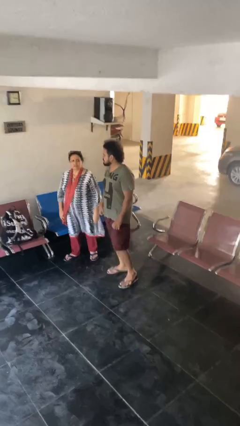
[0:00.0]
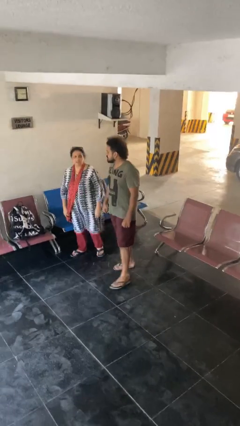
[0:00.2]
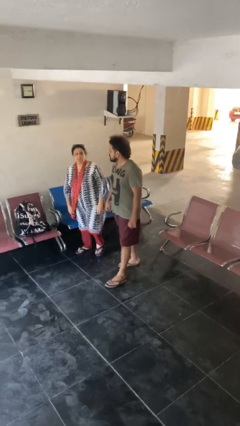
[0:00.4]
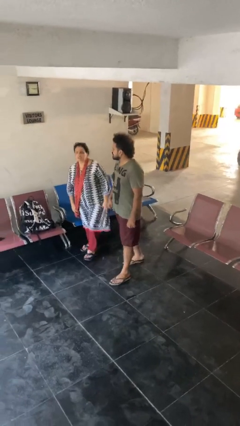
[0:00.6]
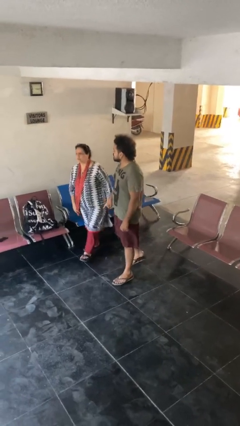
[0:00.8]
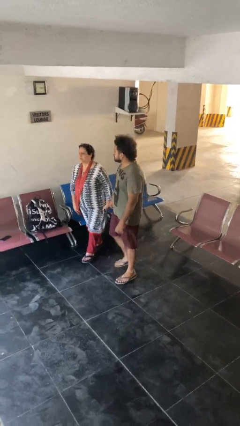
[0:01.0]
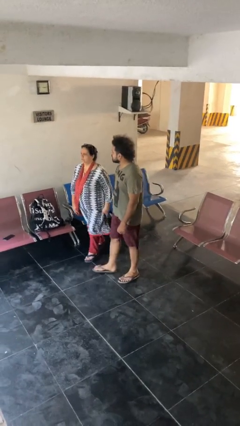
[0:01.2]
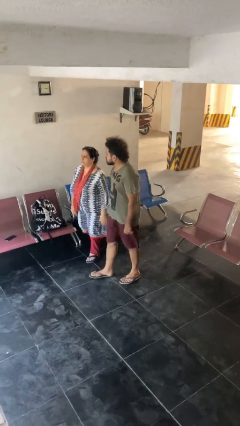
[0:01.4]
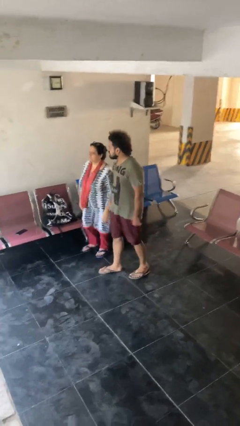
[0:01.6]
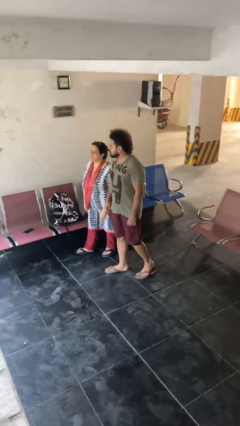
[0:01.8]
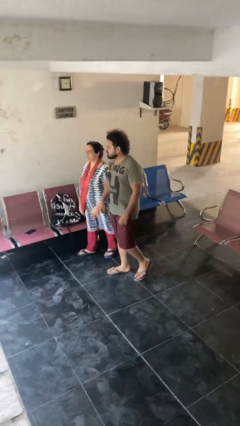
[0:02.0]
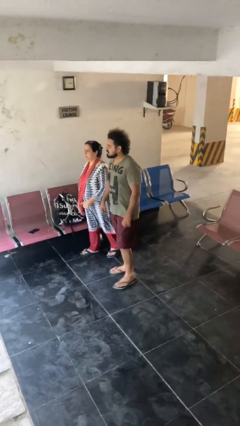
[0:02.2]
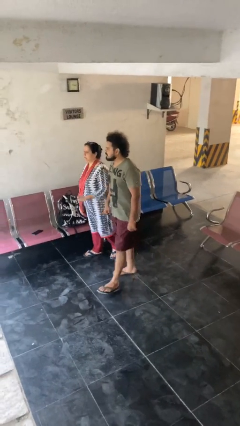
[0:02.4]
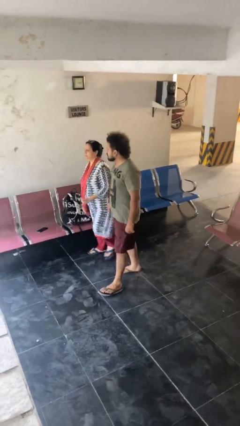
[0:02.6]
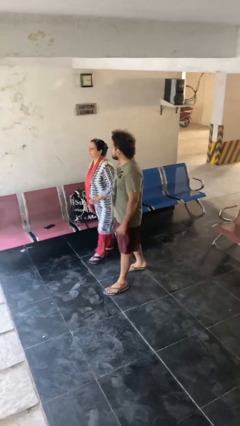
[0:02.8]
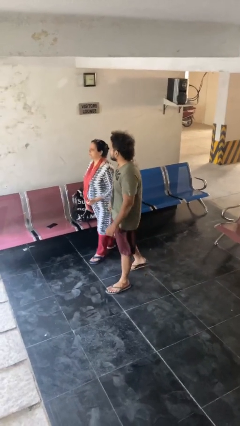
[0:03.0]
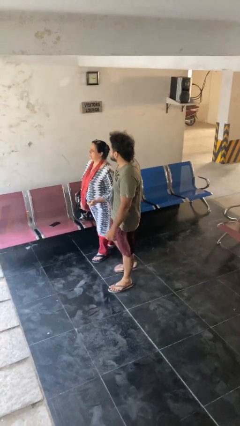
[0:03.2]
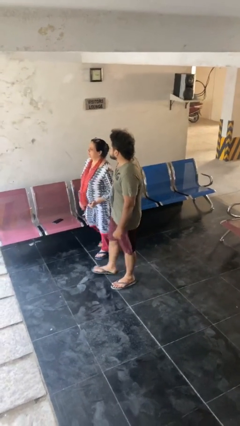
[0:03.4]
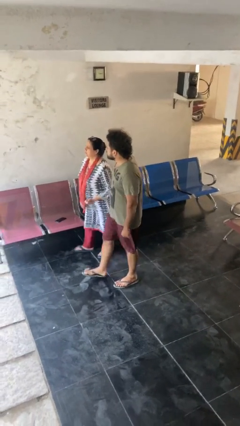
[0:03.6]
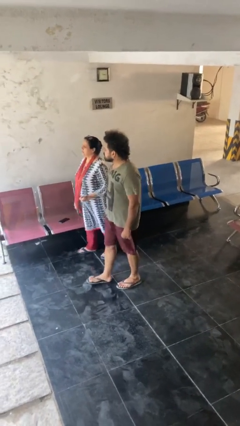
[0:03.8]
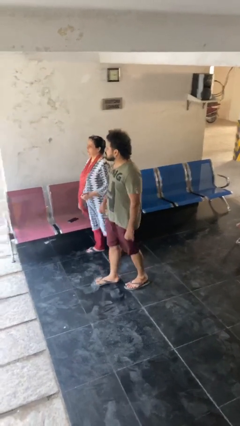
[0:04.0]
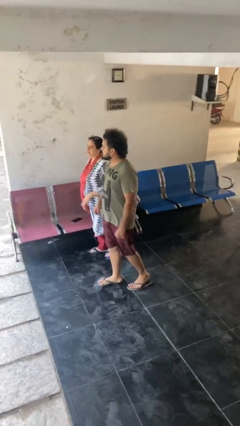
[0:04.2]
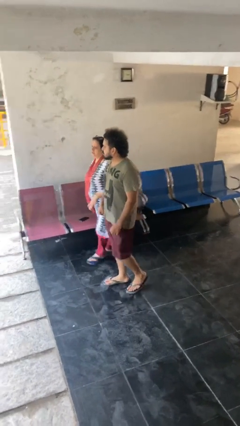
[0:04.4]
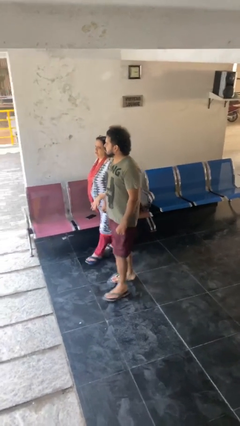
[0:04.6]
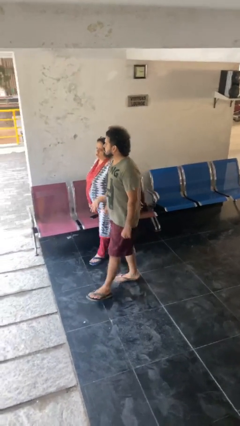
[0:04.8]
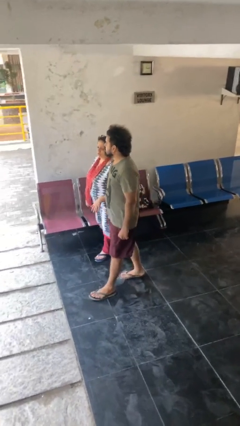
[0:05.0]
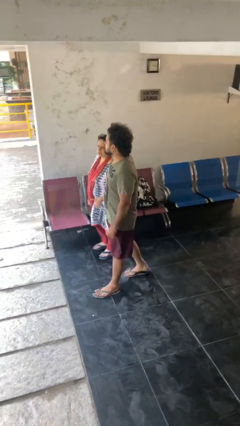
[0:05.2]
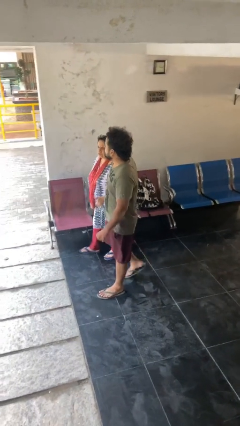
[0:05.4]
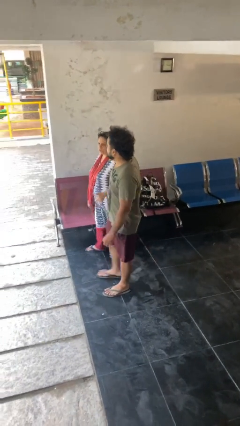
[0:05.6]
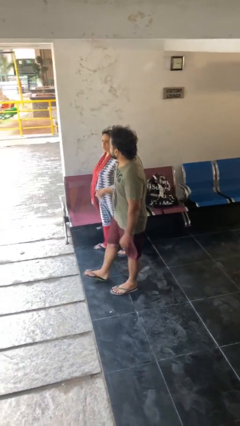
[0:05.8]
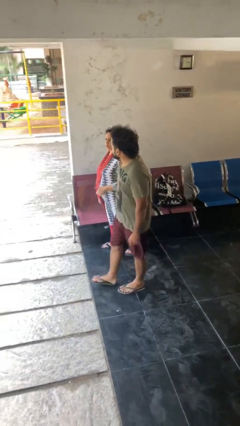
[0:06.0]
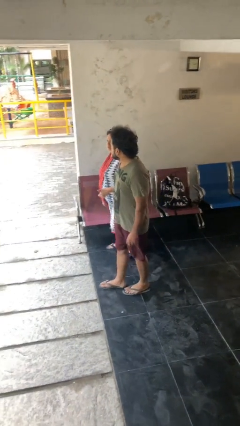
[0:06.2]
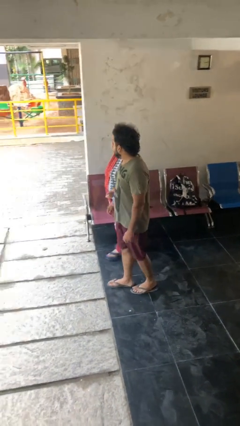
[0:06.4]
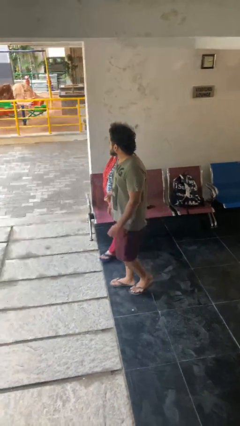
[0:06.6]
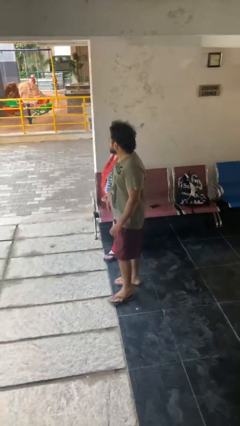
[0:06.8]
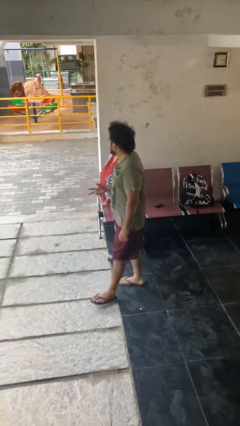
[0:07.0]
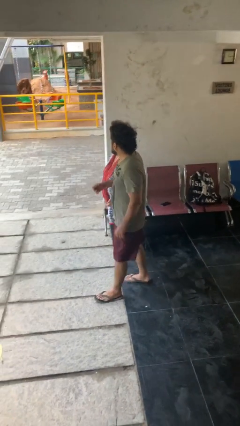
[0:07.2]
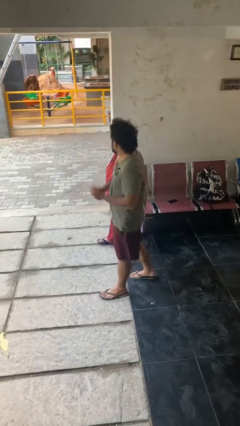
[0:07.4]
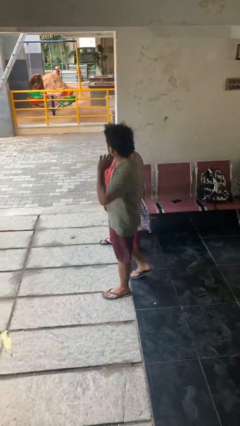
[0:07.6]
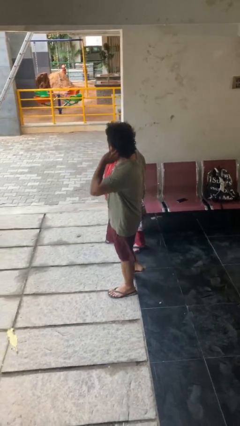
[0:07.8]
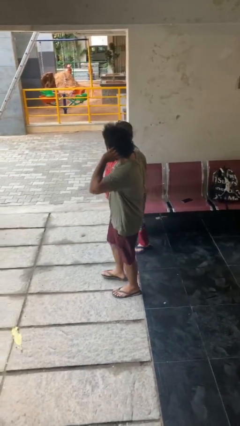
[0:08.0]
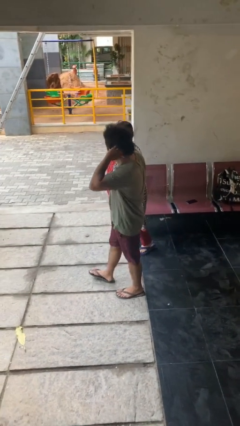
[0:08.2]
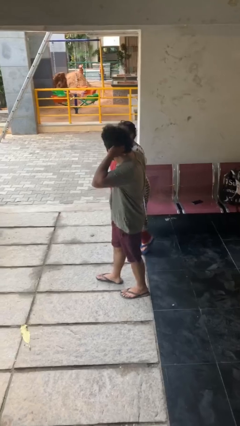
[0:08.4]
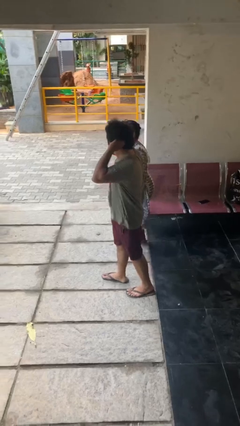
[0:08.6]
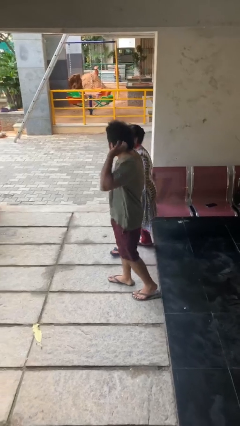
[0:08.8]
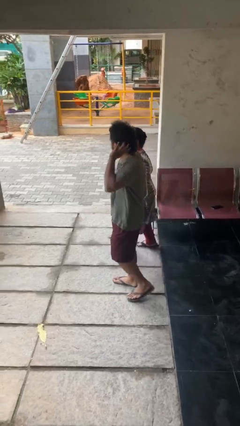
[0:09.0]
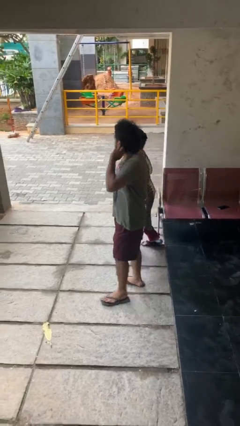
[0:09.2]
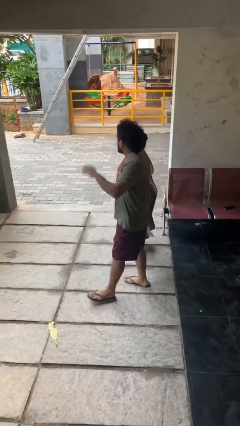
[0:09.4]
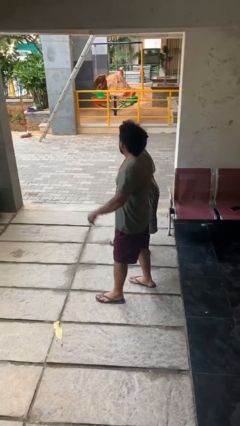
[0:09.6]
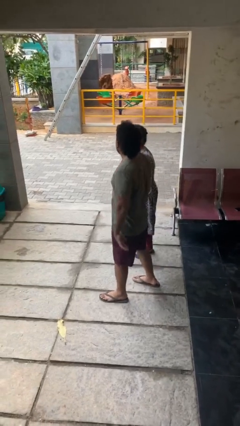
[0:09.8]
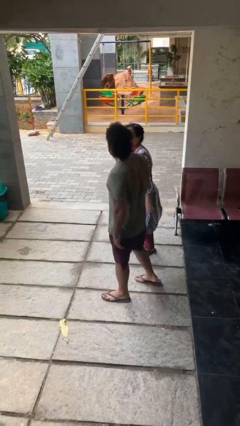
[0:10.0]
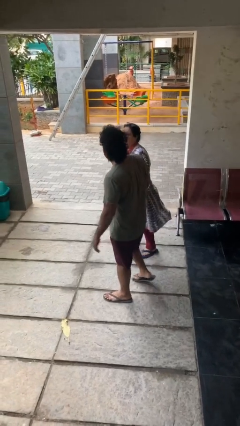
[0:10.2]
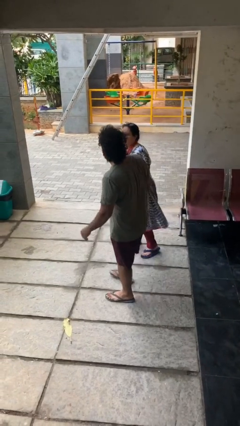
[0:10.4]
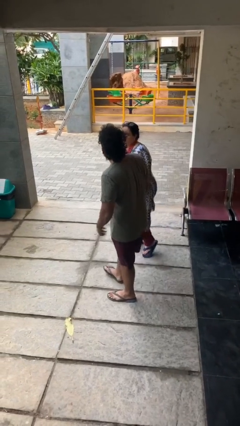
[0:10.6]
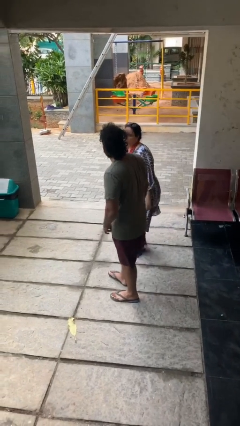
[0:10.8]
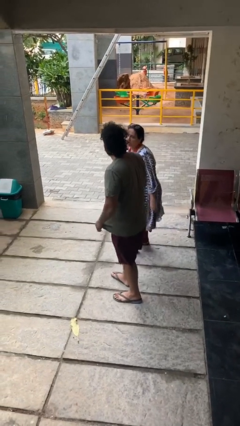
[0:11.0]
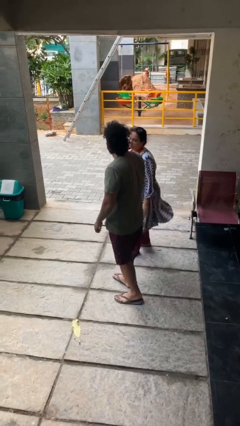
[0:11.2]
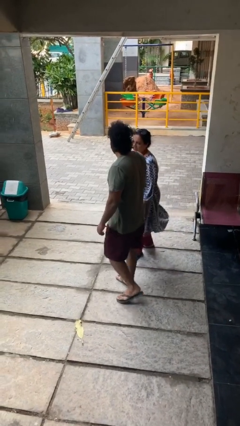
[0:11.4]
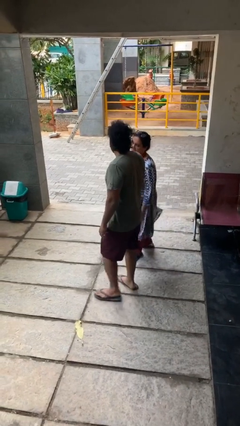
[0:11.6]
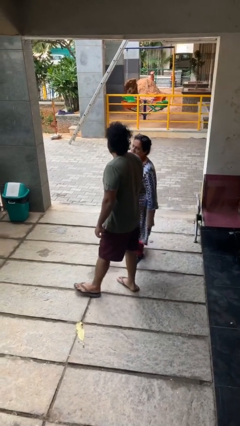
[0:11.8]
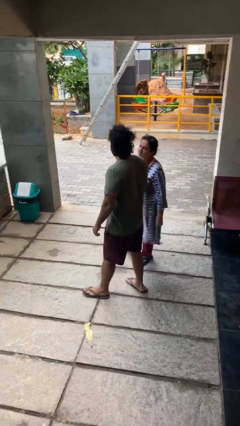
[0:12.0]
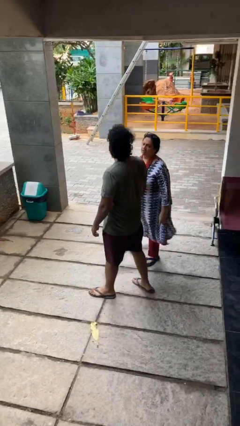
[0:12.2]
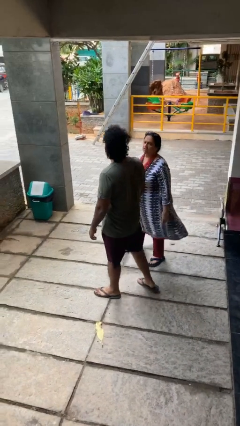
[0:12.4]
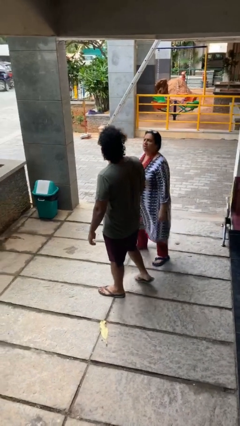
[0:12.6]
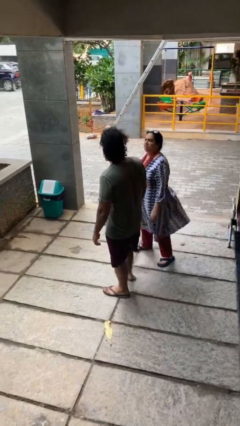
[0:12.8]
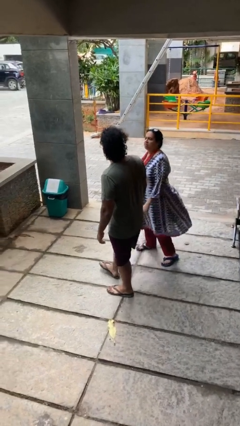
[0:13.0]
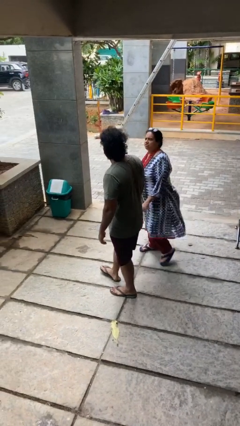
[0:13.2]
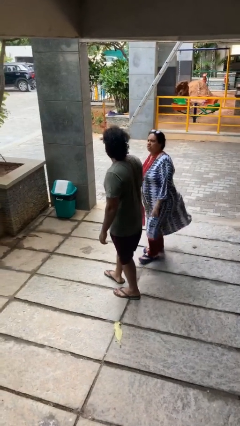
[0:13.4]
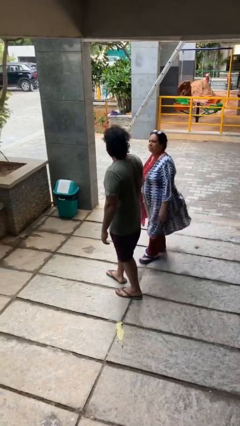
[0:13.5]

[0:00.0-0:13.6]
person talks to person

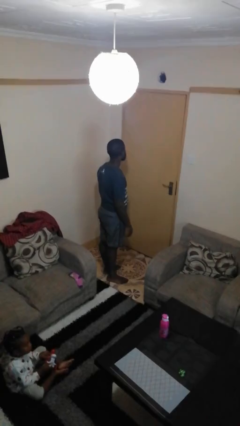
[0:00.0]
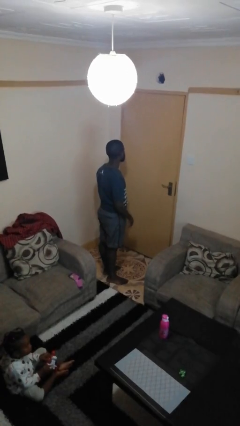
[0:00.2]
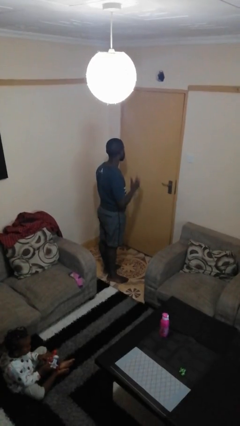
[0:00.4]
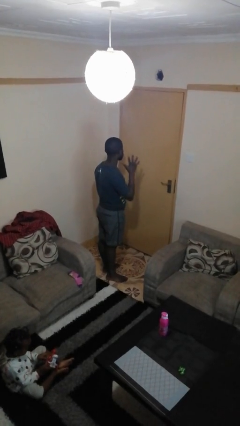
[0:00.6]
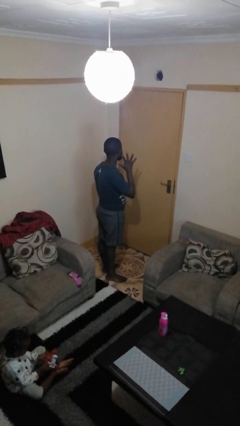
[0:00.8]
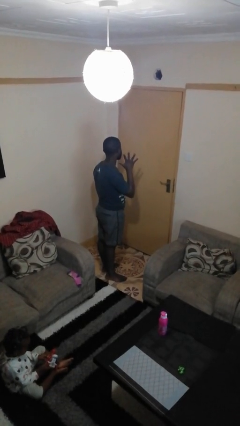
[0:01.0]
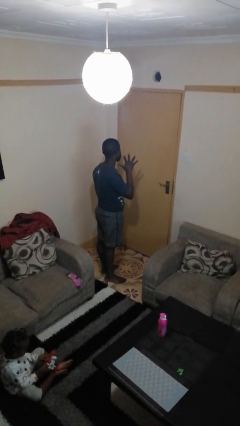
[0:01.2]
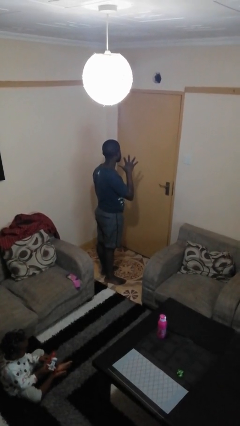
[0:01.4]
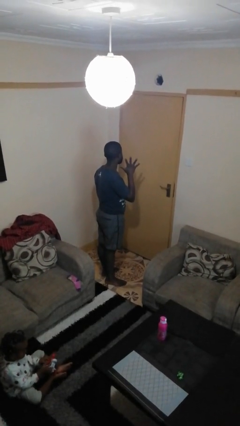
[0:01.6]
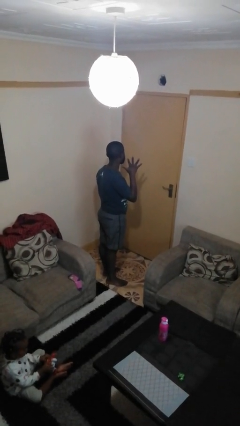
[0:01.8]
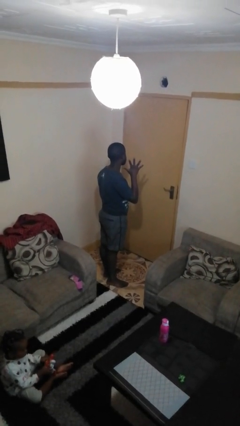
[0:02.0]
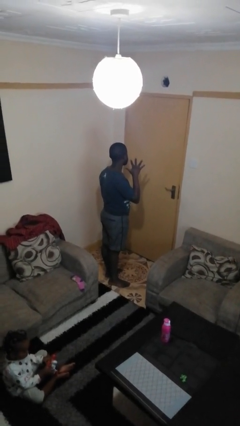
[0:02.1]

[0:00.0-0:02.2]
person gestures number five

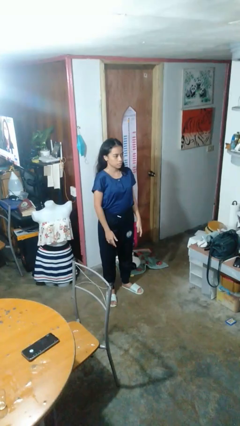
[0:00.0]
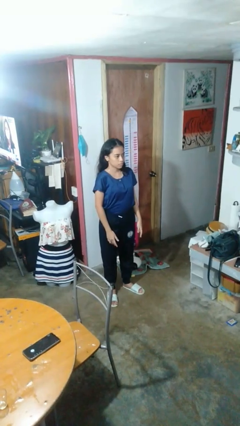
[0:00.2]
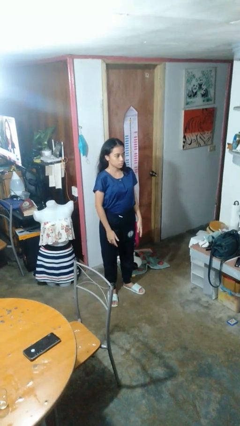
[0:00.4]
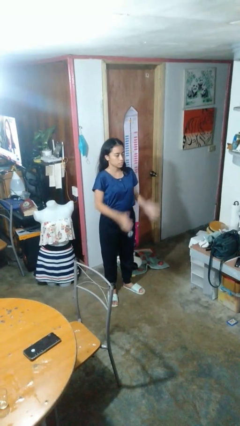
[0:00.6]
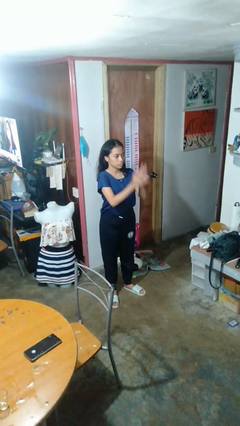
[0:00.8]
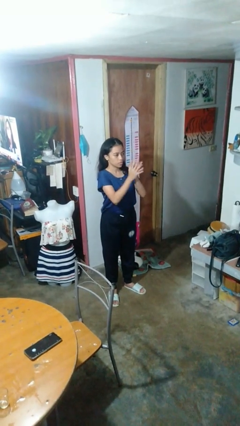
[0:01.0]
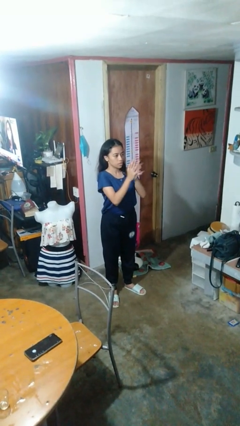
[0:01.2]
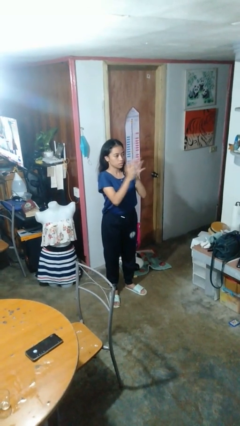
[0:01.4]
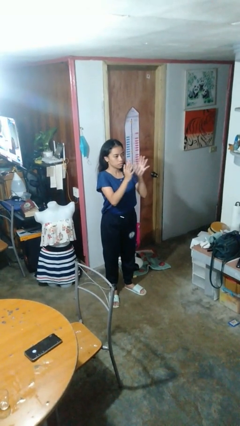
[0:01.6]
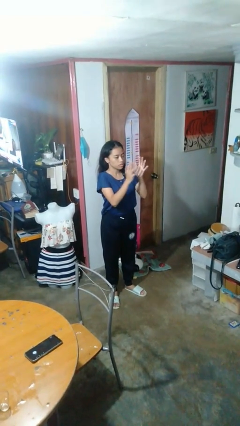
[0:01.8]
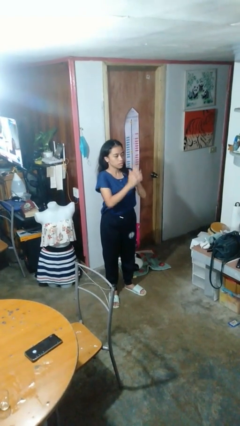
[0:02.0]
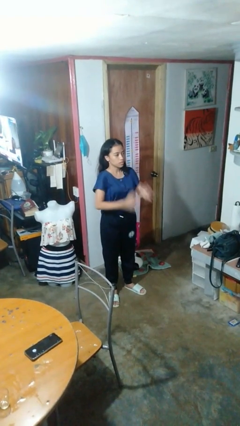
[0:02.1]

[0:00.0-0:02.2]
person claps hands

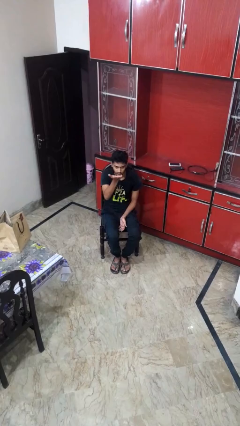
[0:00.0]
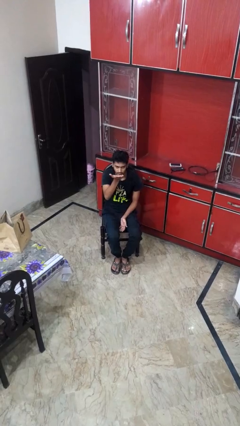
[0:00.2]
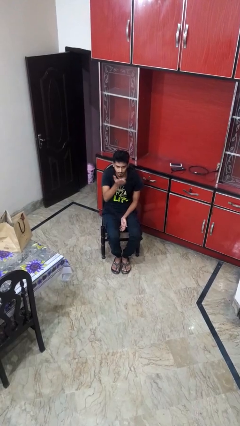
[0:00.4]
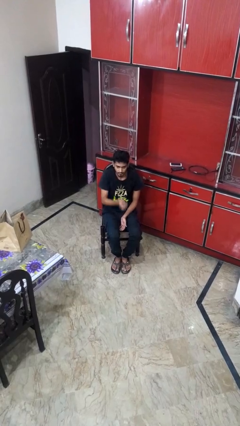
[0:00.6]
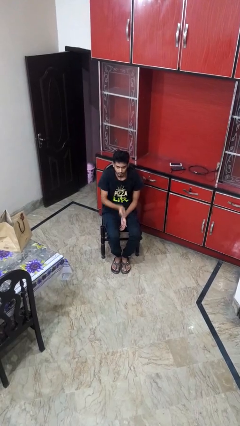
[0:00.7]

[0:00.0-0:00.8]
person gestures swipe up
